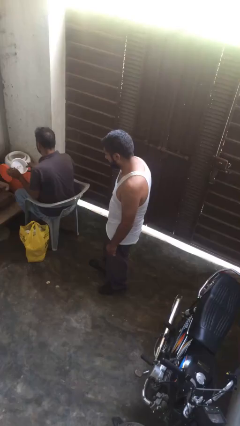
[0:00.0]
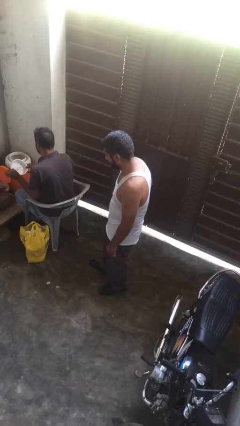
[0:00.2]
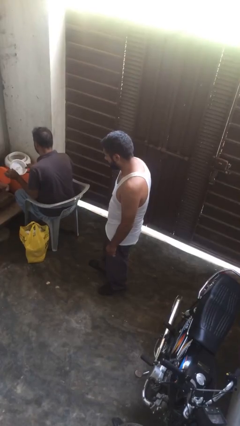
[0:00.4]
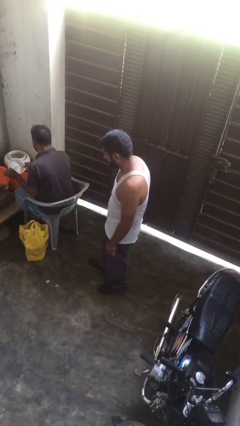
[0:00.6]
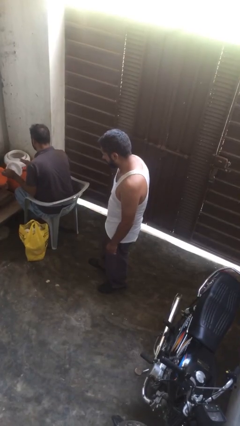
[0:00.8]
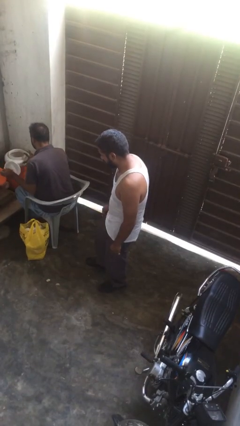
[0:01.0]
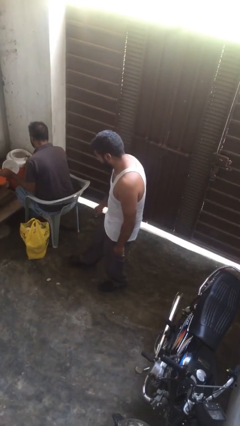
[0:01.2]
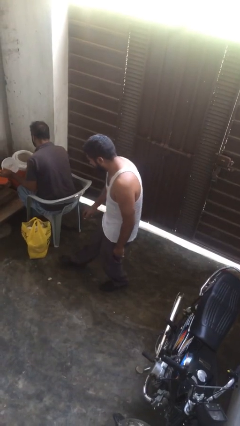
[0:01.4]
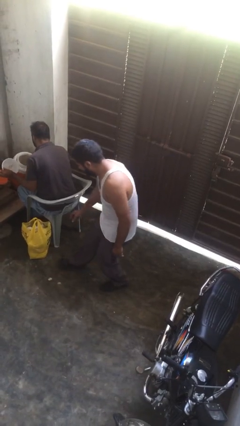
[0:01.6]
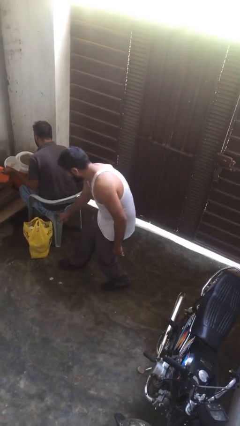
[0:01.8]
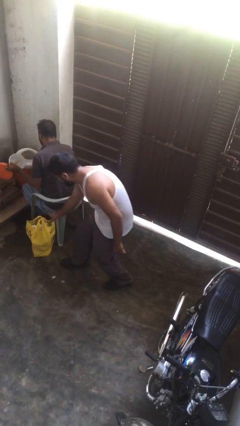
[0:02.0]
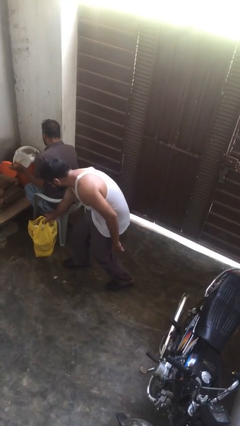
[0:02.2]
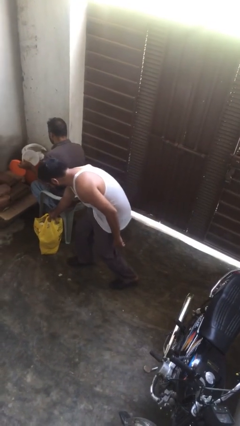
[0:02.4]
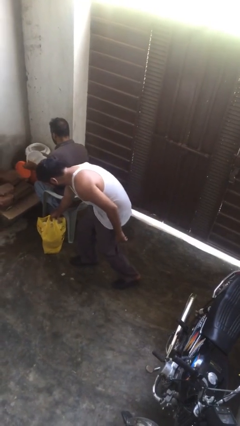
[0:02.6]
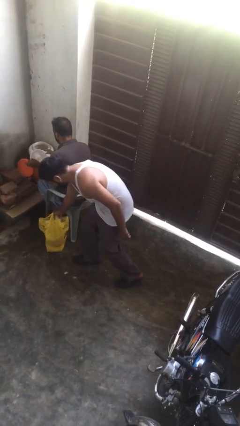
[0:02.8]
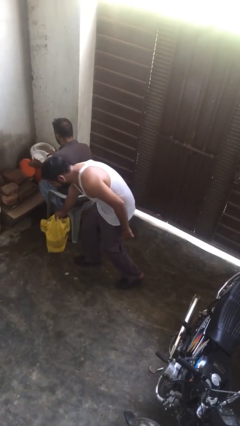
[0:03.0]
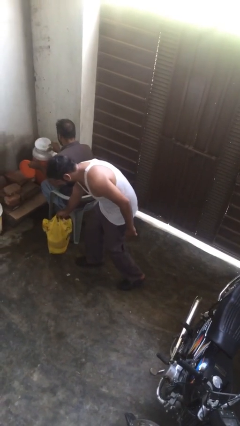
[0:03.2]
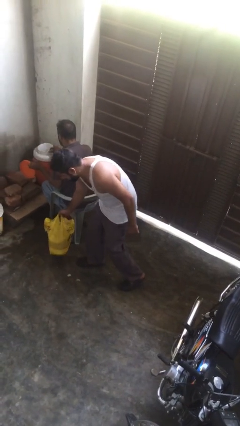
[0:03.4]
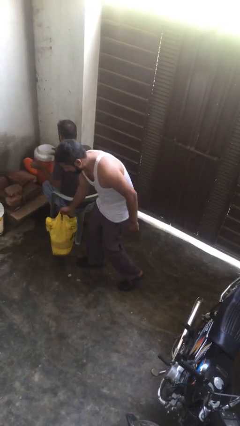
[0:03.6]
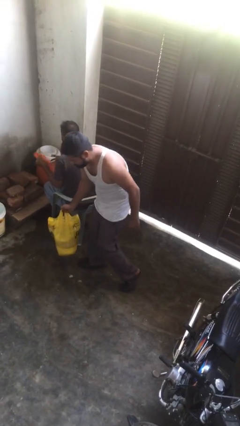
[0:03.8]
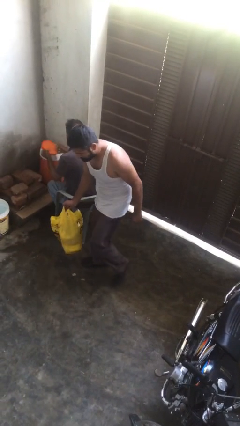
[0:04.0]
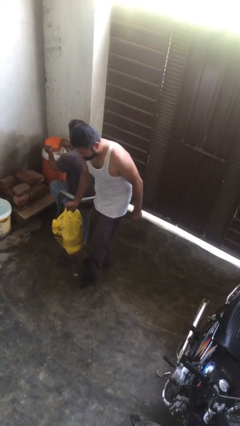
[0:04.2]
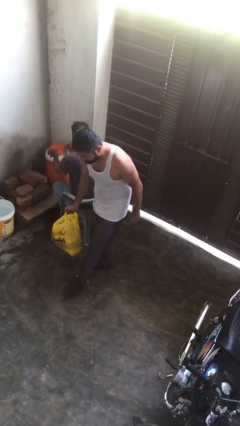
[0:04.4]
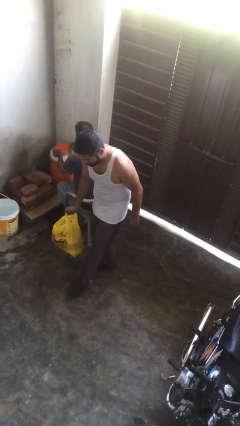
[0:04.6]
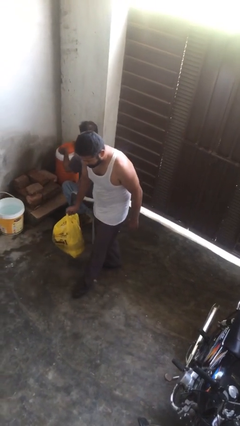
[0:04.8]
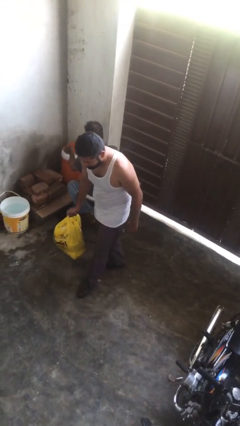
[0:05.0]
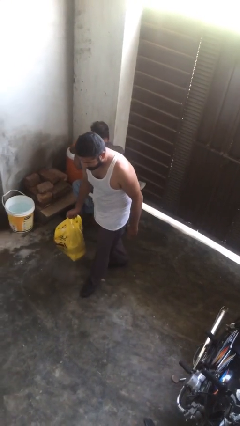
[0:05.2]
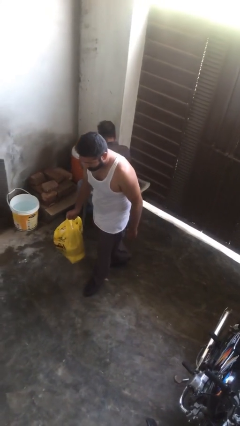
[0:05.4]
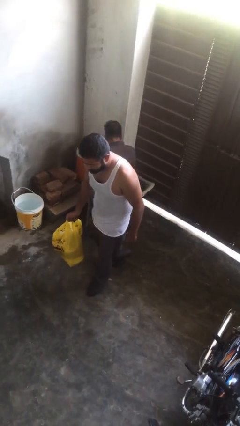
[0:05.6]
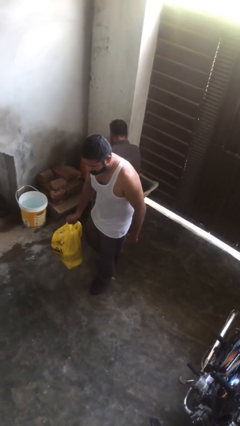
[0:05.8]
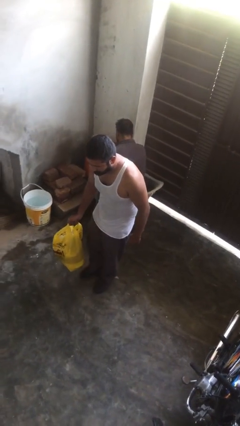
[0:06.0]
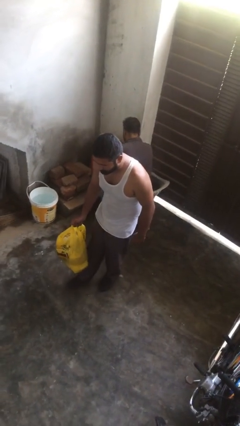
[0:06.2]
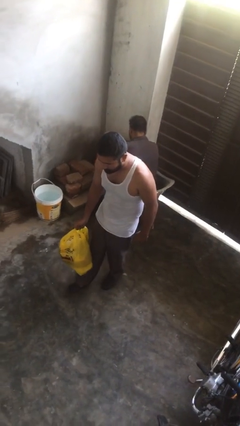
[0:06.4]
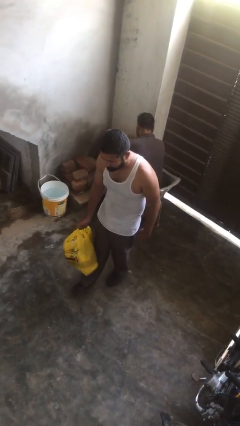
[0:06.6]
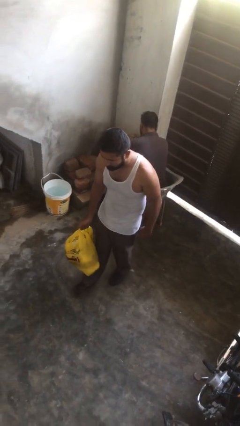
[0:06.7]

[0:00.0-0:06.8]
person steals object from person

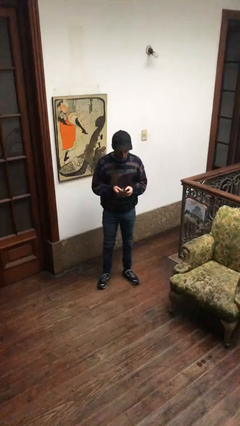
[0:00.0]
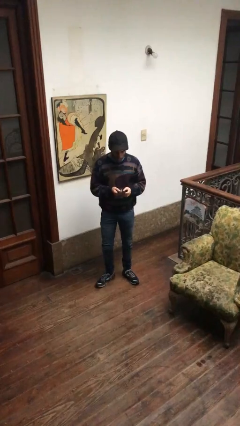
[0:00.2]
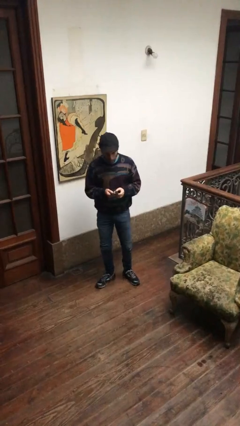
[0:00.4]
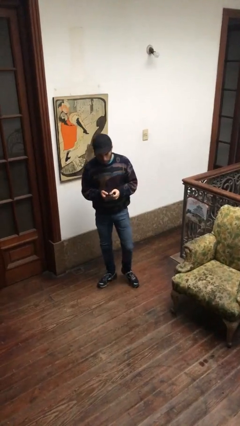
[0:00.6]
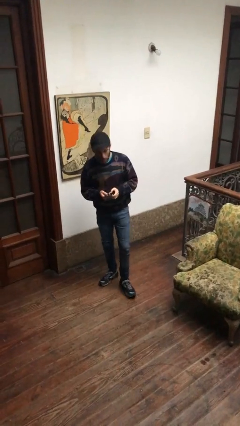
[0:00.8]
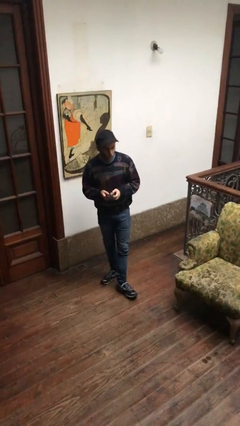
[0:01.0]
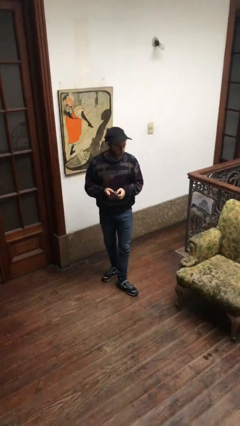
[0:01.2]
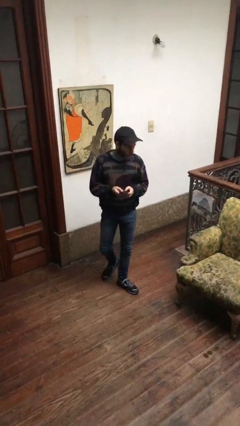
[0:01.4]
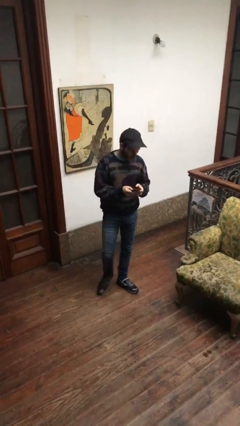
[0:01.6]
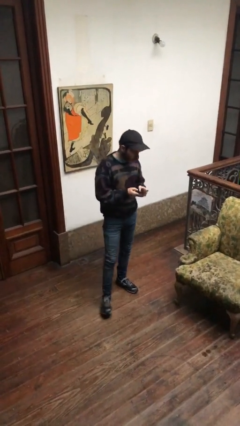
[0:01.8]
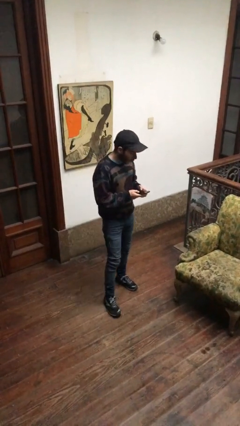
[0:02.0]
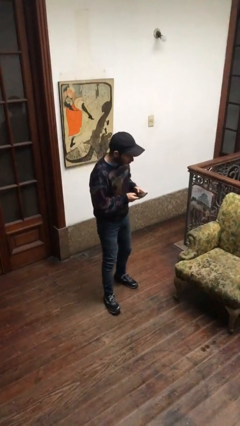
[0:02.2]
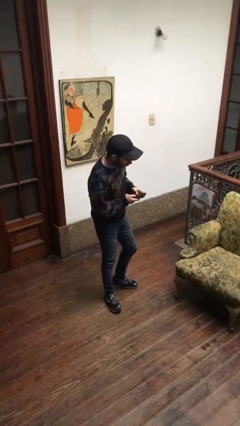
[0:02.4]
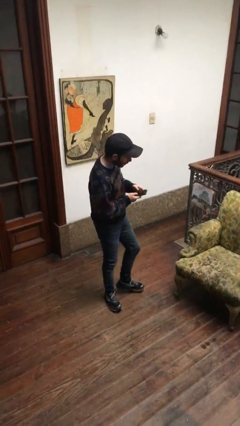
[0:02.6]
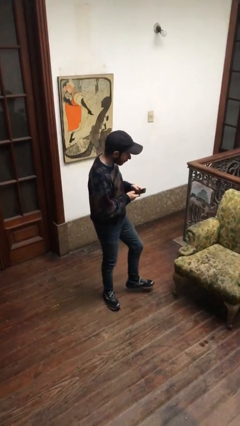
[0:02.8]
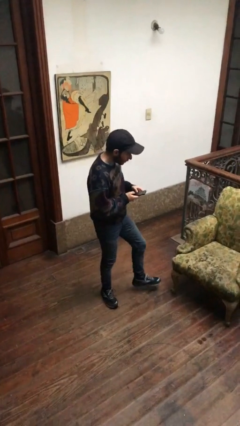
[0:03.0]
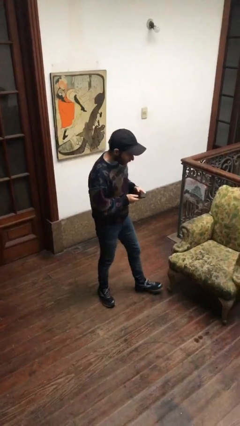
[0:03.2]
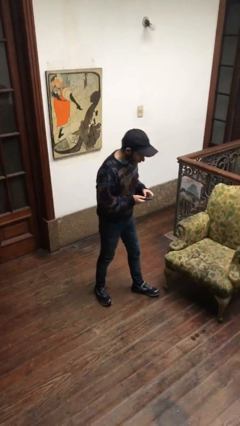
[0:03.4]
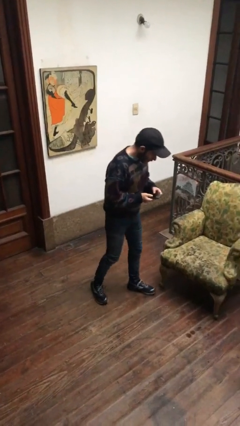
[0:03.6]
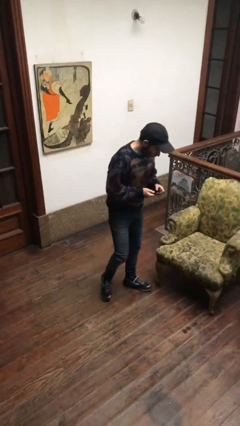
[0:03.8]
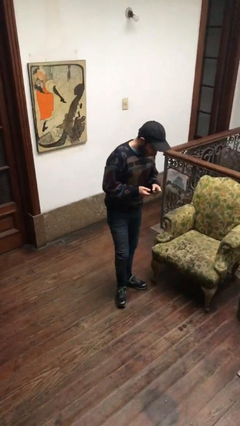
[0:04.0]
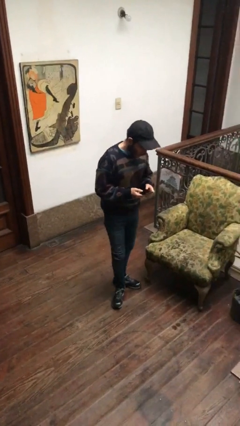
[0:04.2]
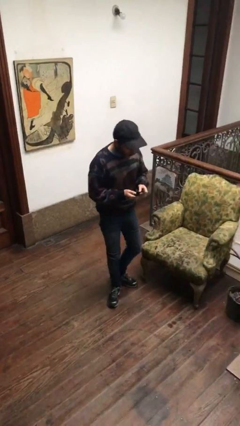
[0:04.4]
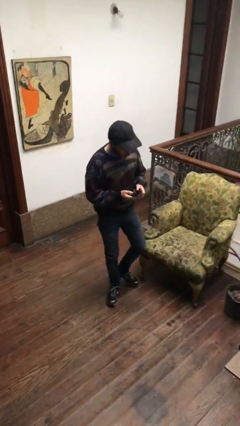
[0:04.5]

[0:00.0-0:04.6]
person texts on phone

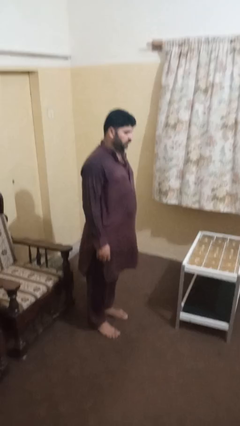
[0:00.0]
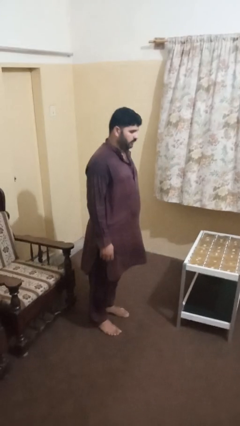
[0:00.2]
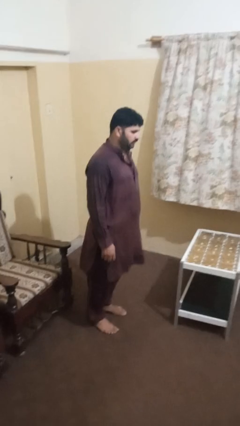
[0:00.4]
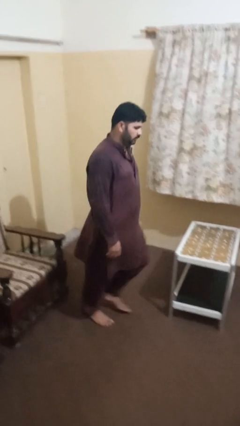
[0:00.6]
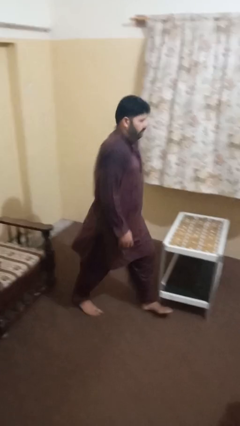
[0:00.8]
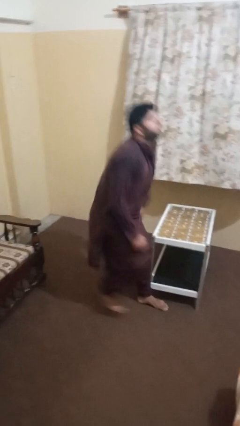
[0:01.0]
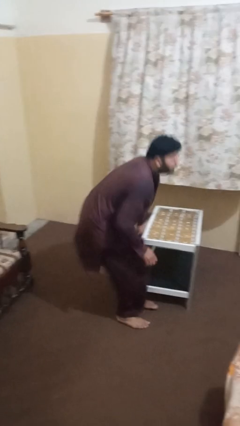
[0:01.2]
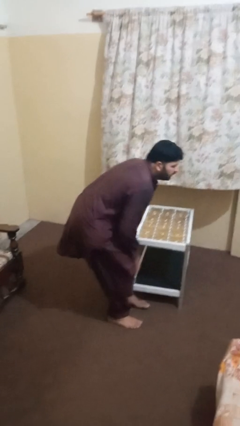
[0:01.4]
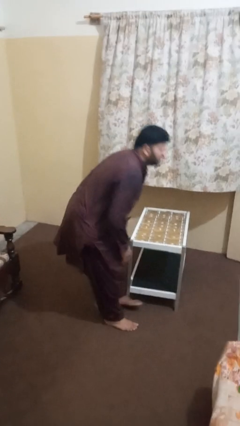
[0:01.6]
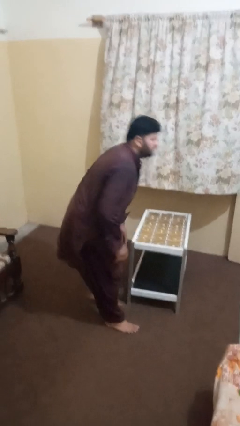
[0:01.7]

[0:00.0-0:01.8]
person bumps into table

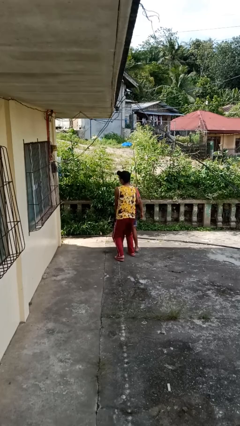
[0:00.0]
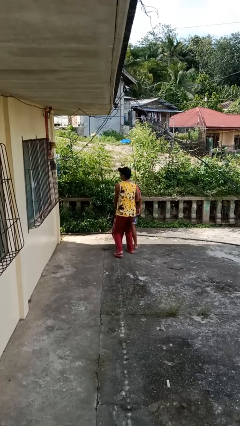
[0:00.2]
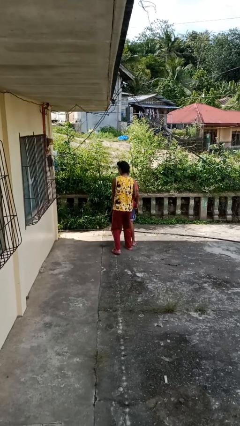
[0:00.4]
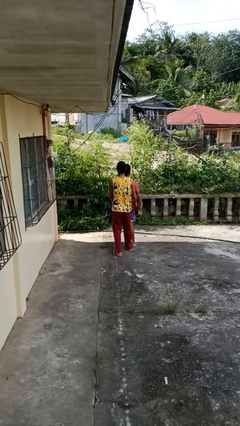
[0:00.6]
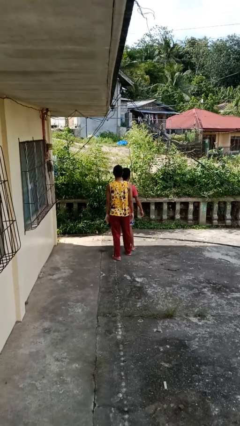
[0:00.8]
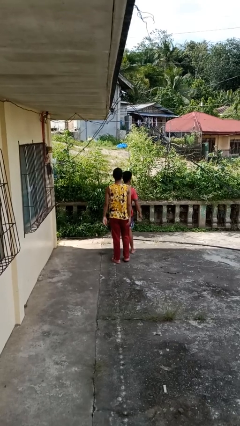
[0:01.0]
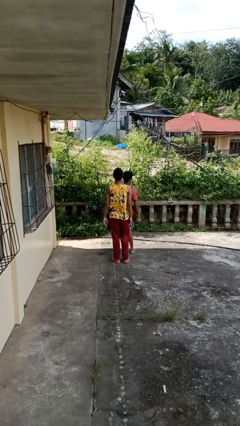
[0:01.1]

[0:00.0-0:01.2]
person puts down person

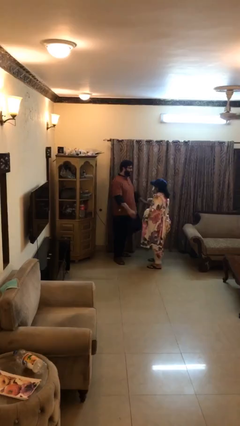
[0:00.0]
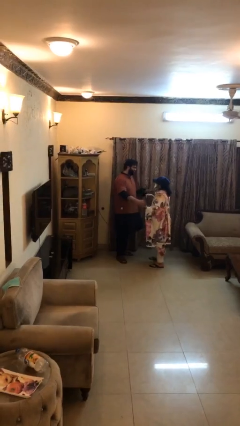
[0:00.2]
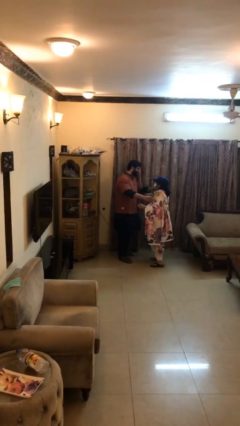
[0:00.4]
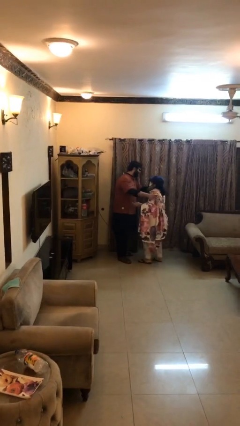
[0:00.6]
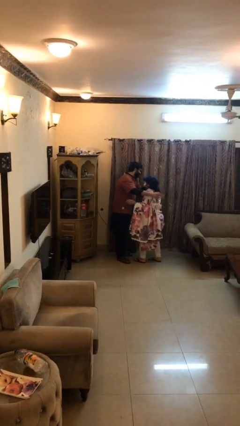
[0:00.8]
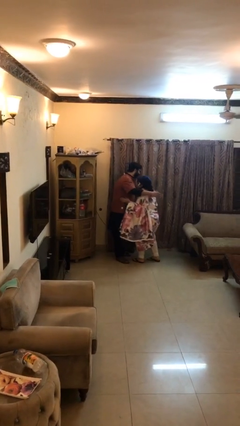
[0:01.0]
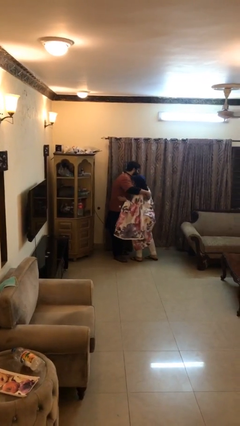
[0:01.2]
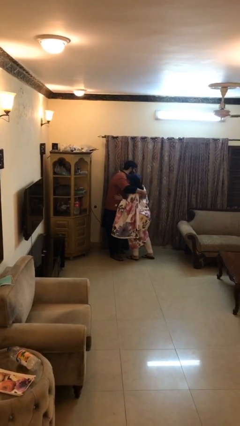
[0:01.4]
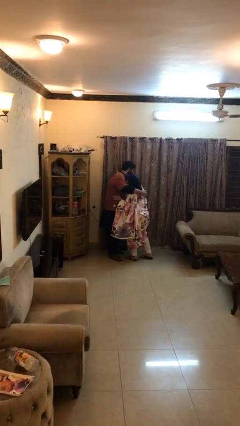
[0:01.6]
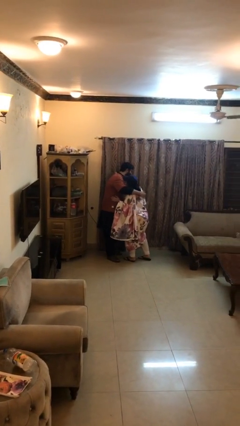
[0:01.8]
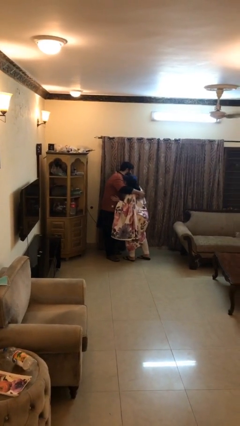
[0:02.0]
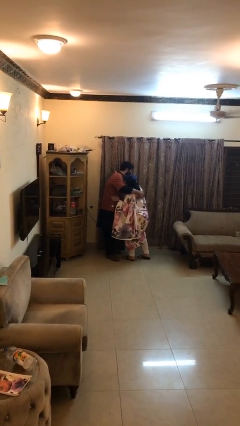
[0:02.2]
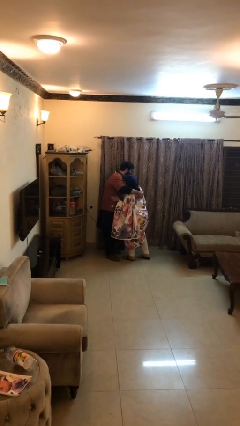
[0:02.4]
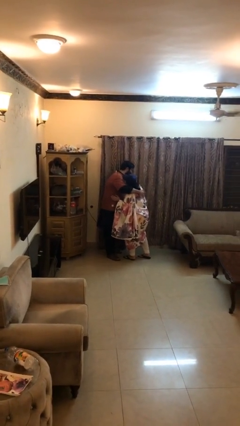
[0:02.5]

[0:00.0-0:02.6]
person embraces person

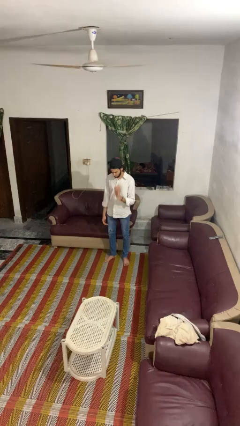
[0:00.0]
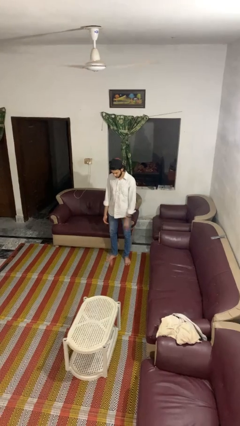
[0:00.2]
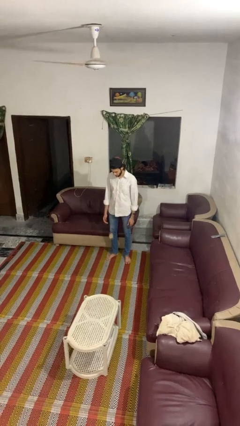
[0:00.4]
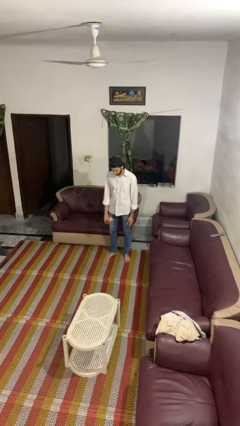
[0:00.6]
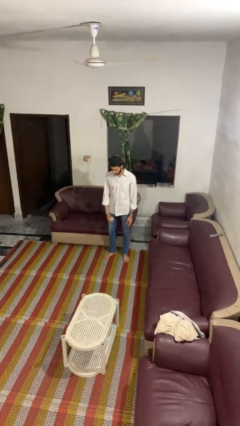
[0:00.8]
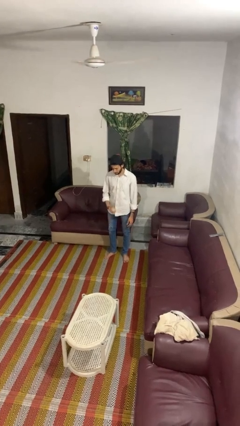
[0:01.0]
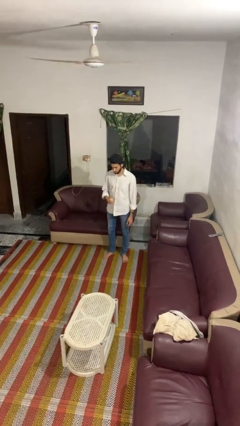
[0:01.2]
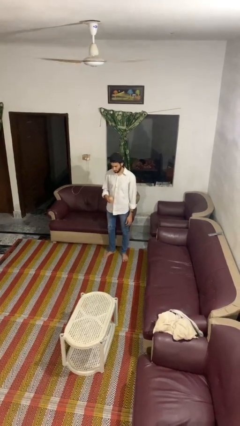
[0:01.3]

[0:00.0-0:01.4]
person bounces ball on floor
